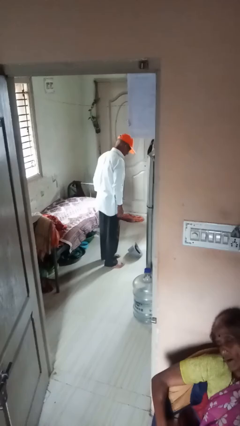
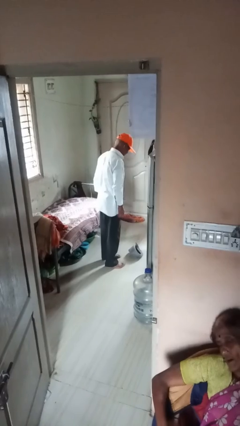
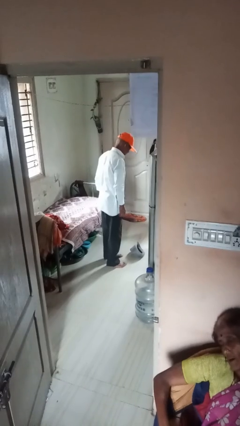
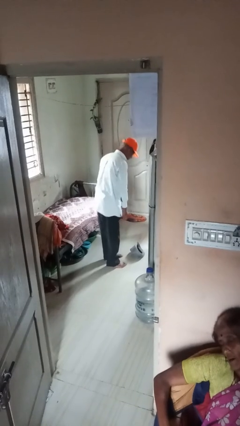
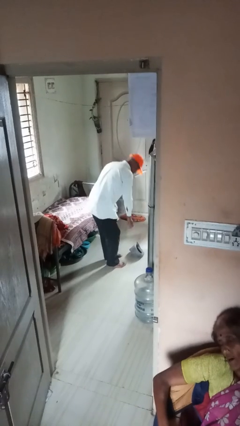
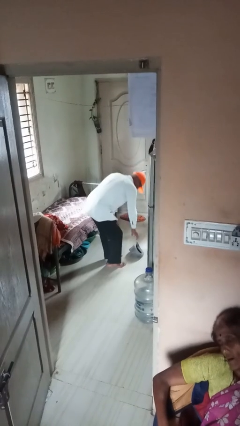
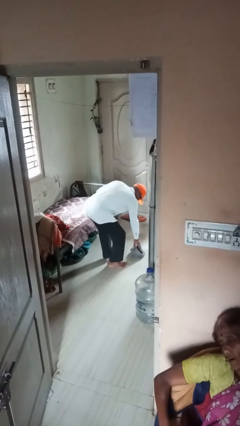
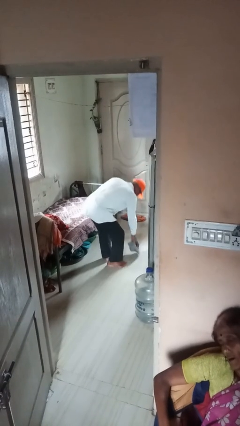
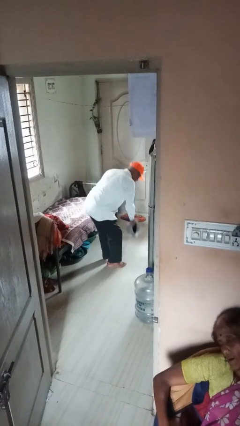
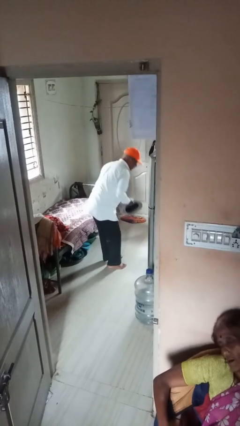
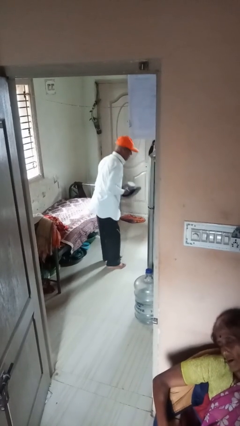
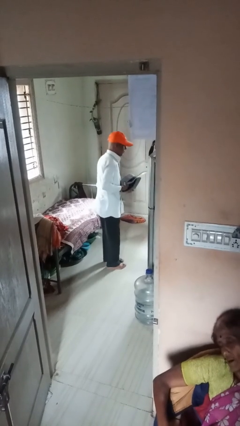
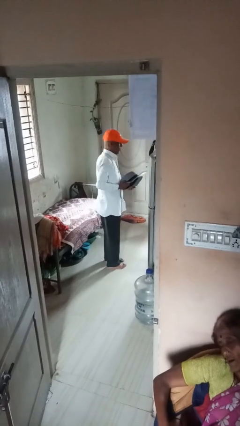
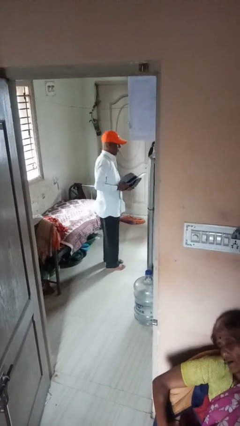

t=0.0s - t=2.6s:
person picks up object from floor

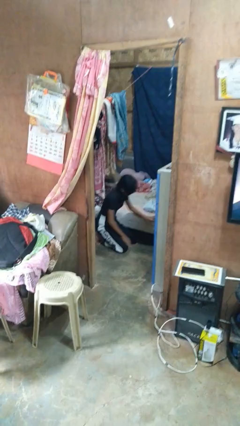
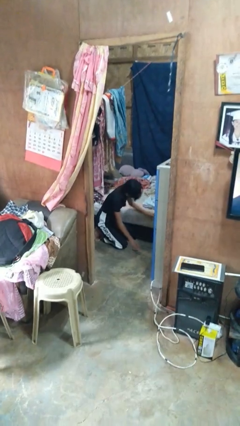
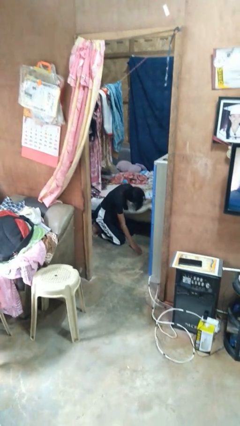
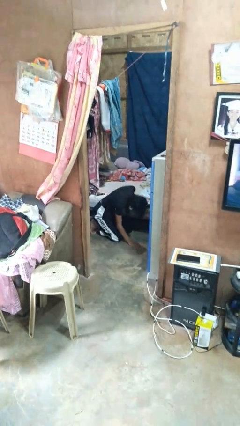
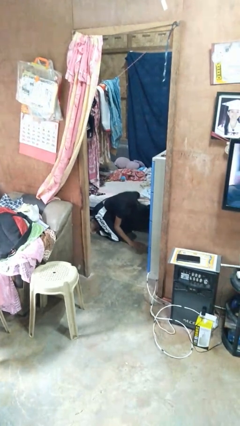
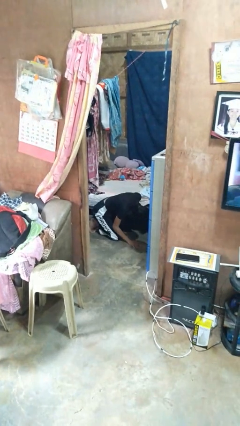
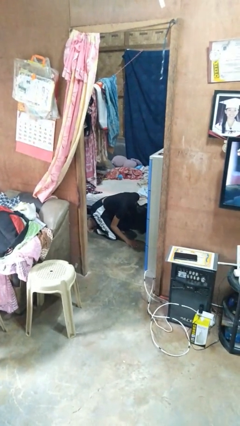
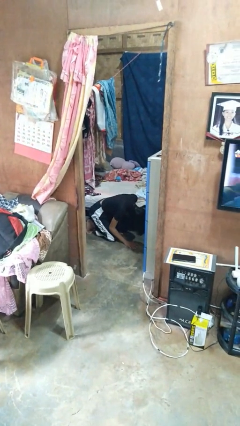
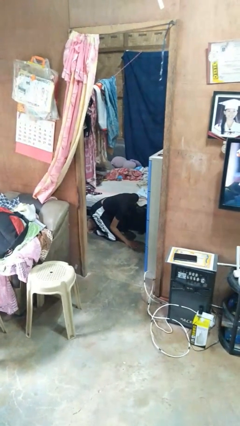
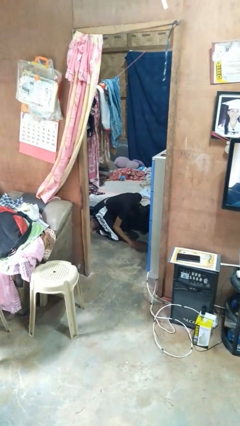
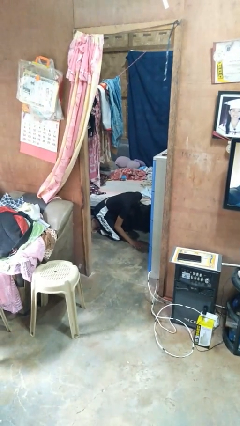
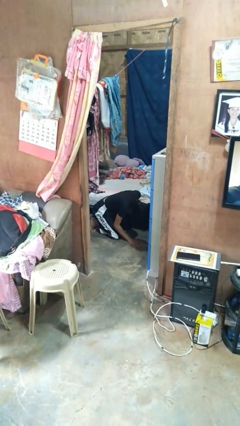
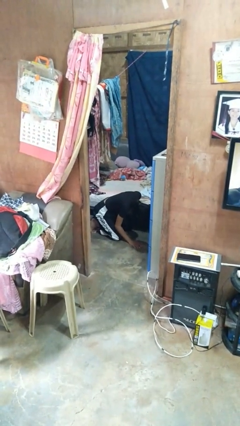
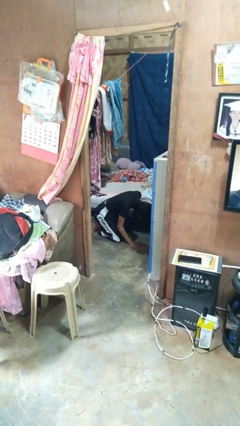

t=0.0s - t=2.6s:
person searches under bed

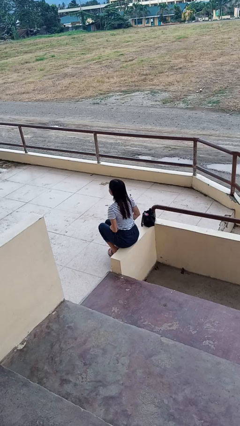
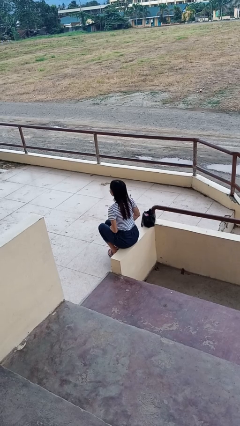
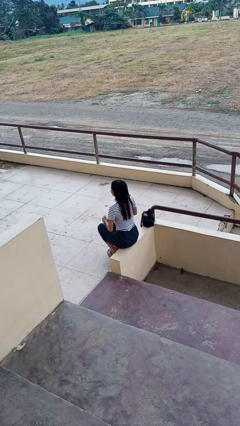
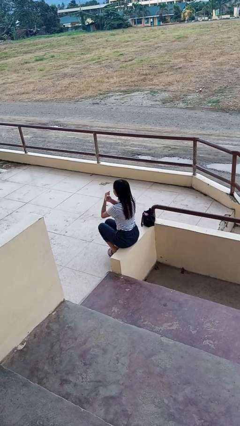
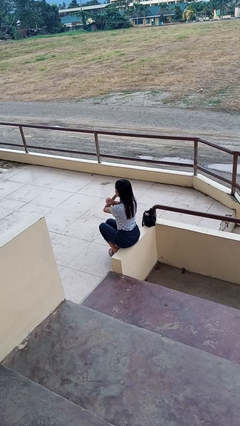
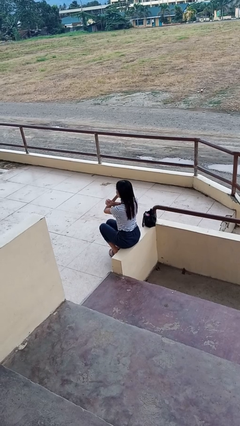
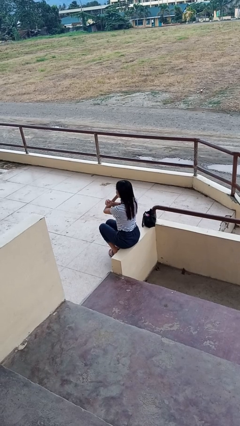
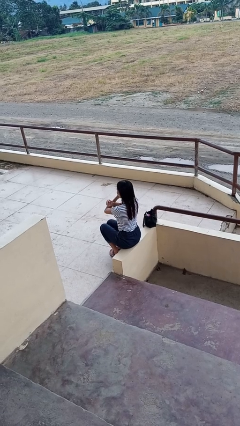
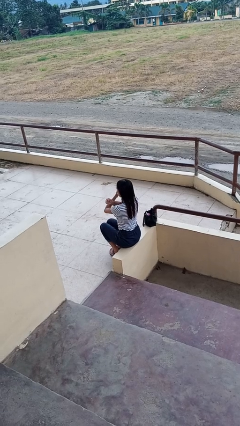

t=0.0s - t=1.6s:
person gestures arms x

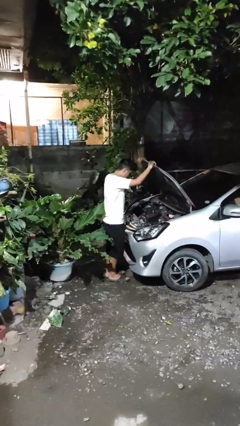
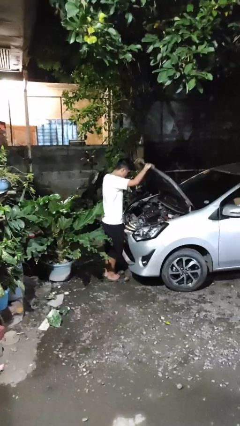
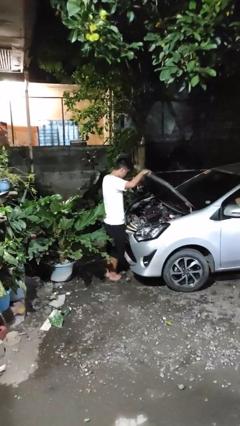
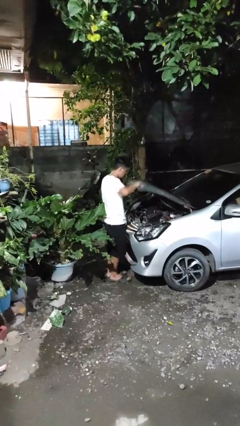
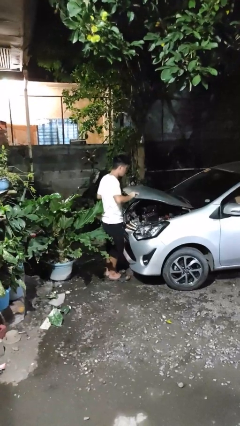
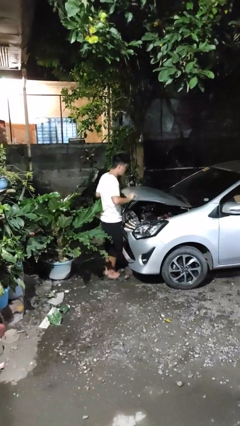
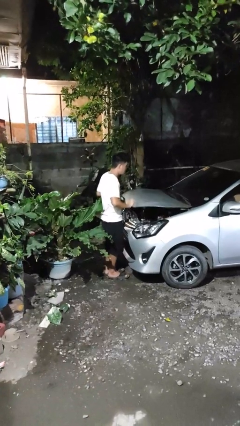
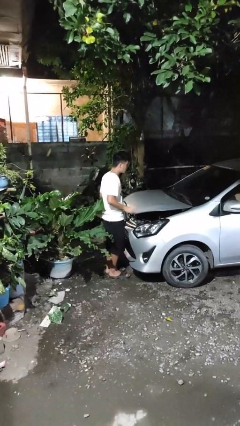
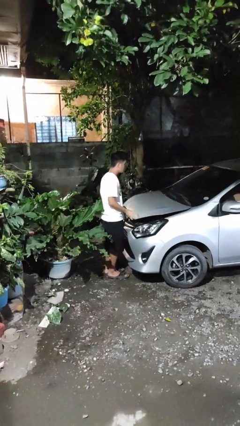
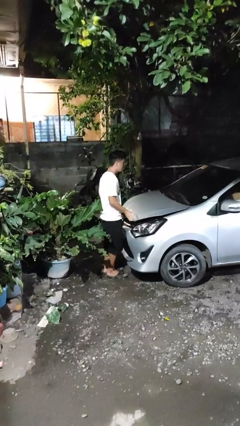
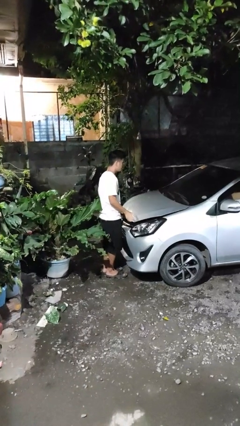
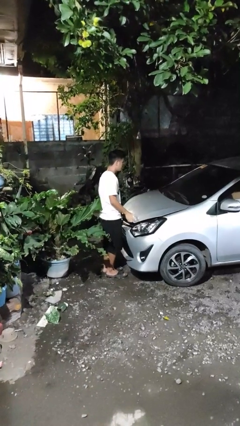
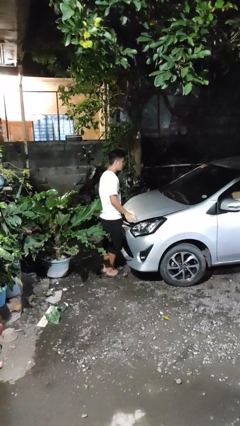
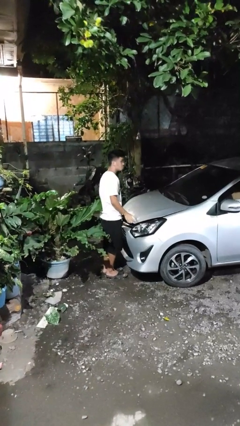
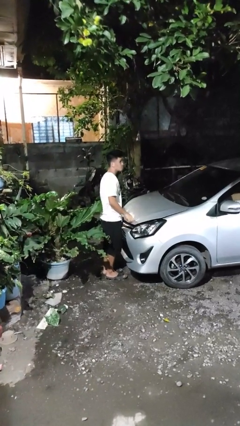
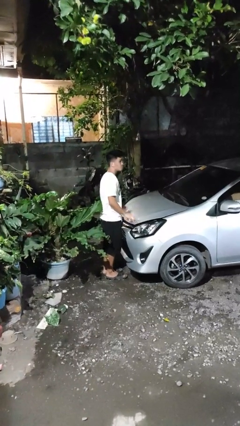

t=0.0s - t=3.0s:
person closes car hood

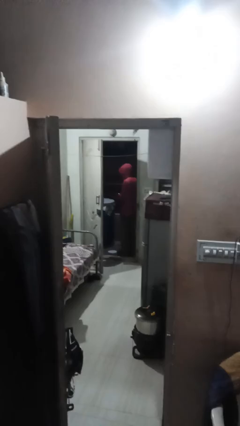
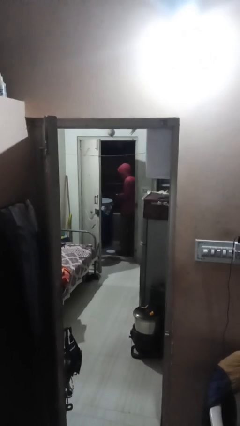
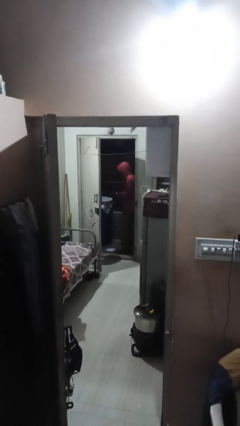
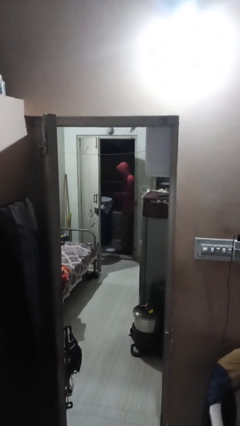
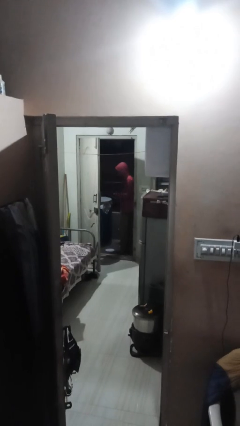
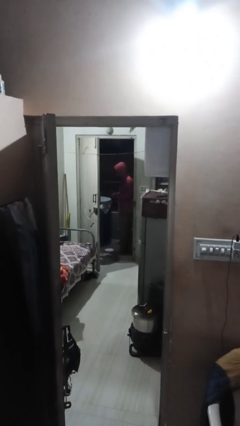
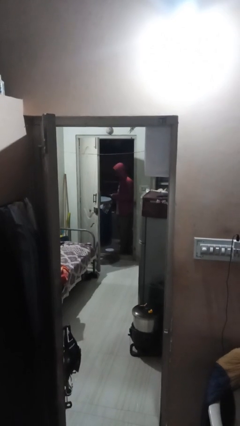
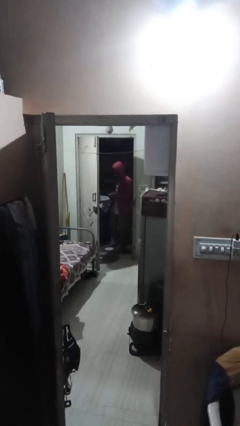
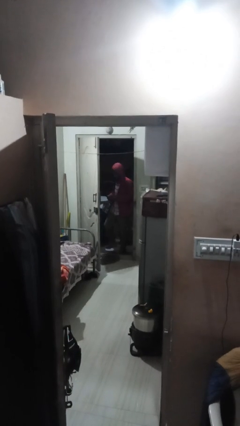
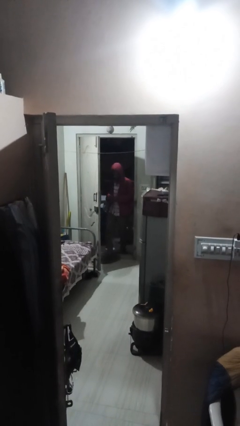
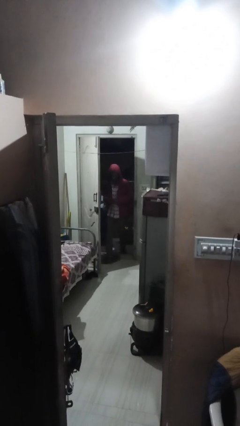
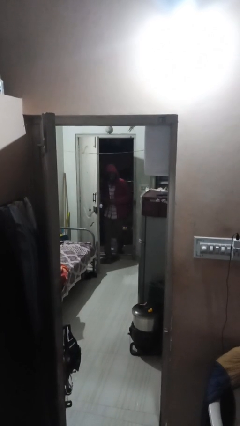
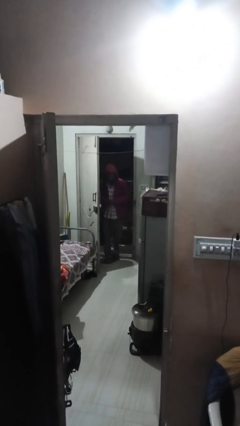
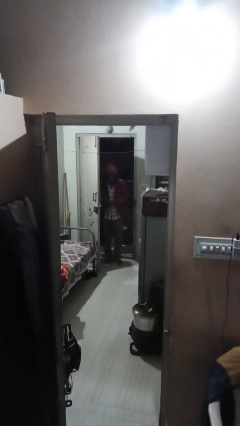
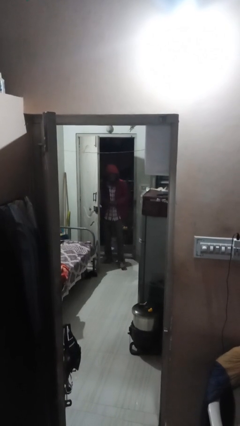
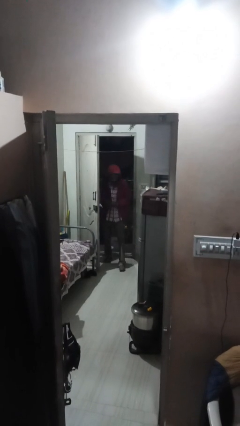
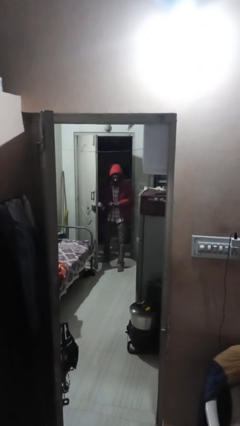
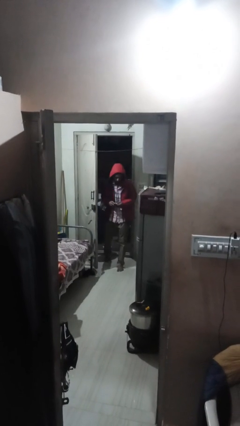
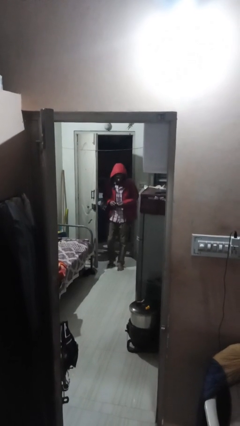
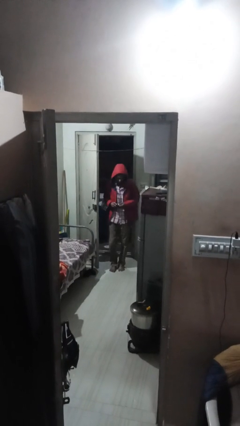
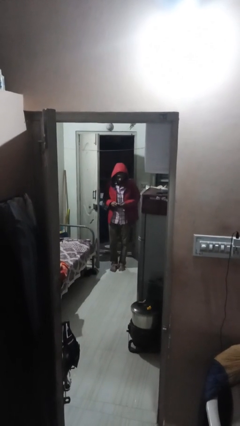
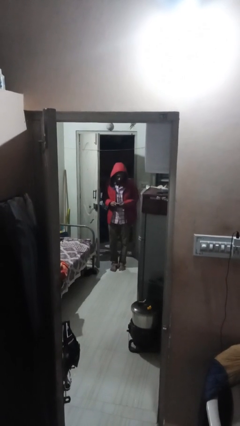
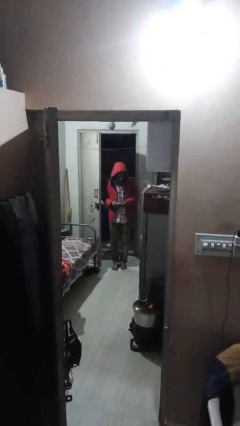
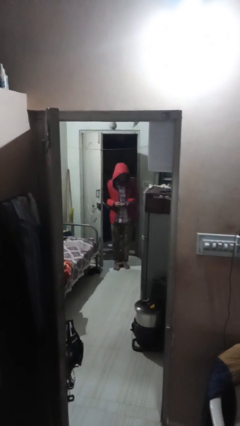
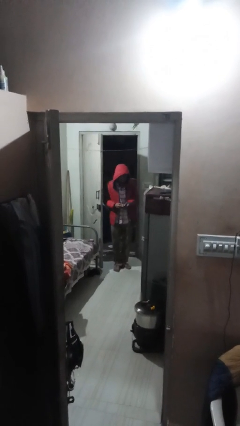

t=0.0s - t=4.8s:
person enters scene through structure

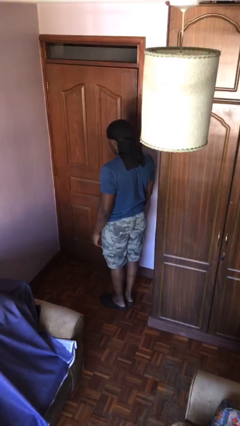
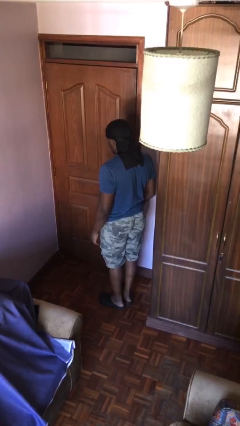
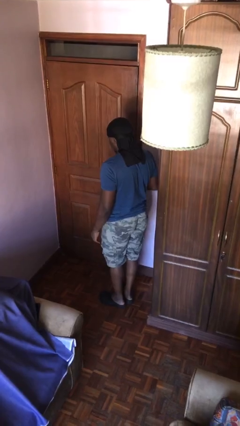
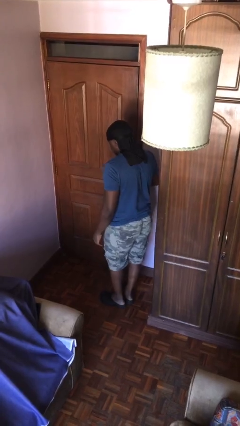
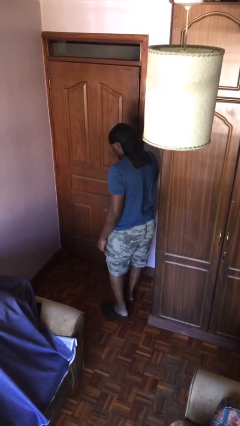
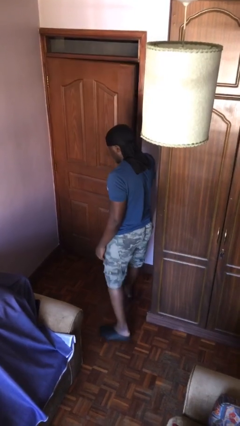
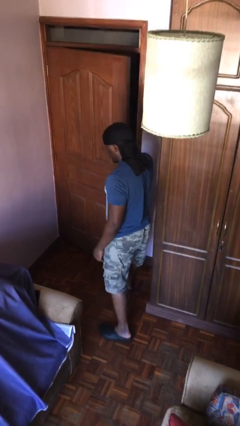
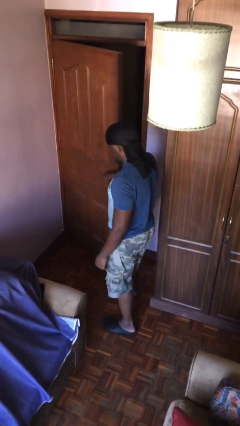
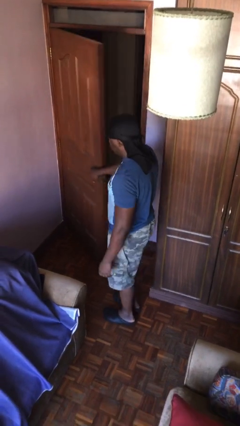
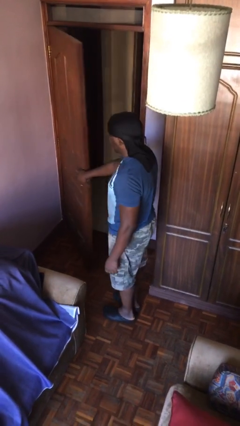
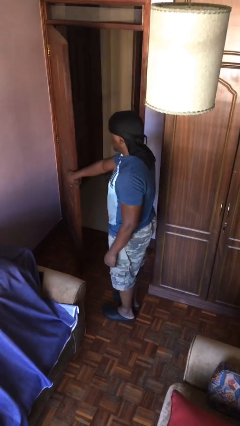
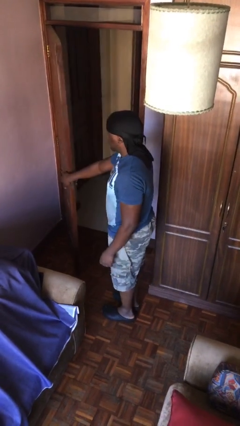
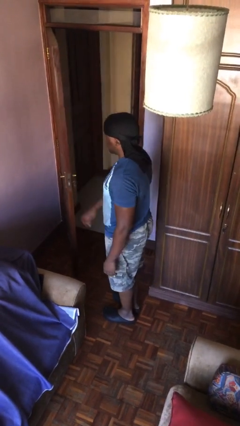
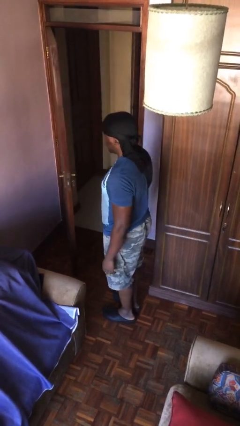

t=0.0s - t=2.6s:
person opens facility door

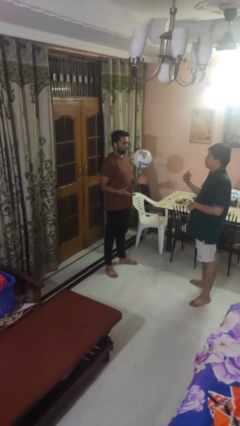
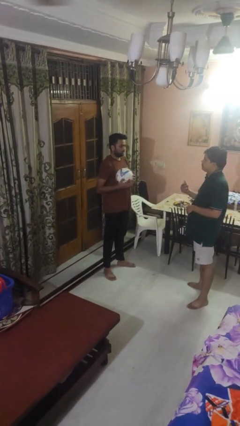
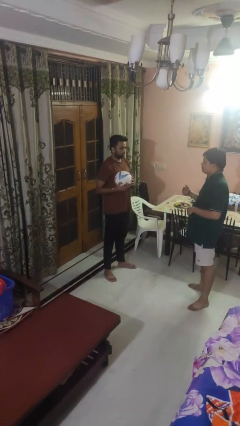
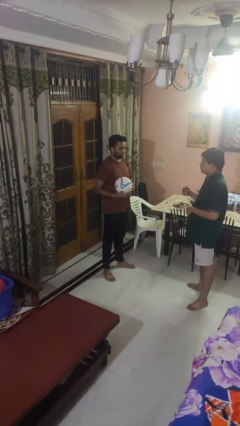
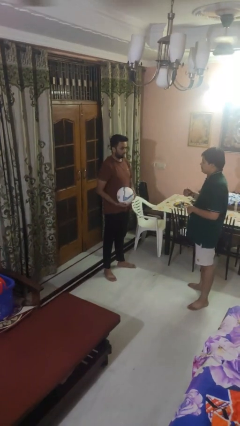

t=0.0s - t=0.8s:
person catches object from person
